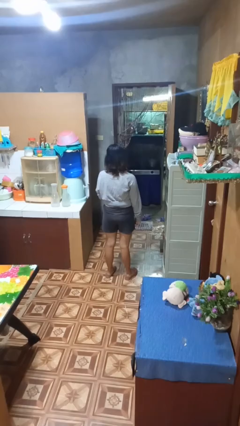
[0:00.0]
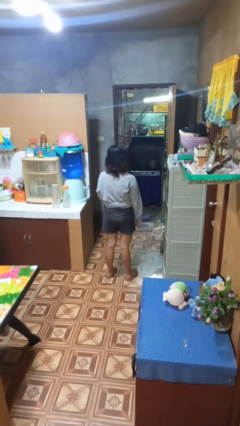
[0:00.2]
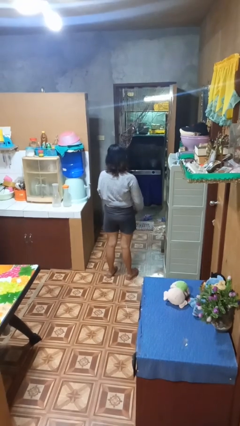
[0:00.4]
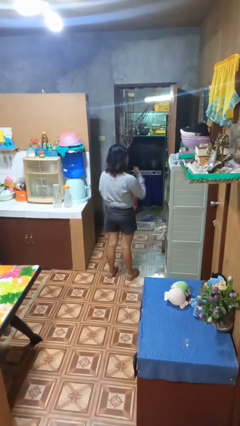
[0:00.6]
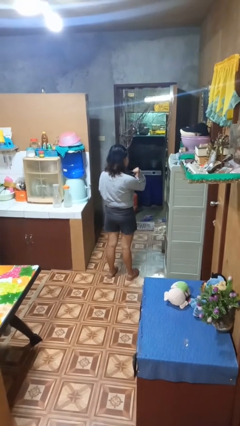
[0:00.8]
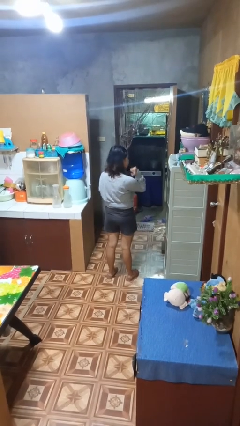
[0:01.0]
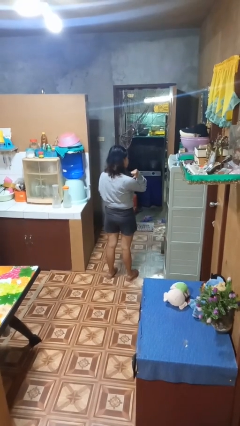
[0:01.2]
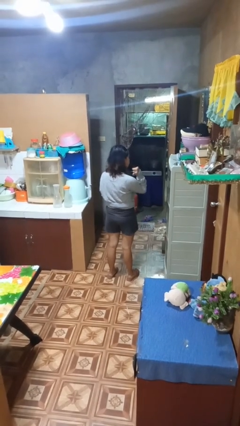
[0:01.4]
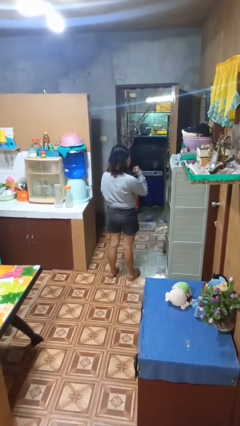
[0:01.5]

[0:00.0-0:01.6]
person gestures behind me

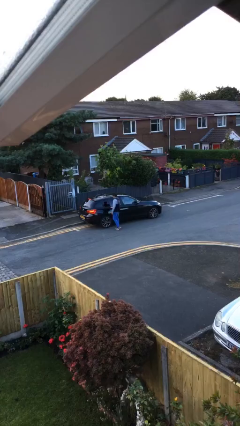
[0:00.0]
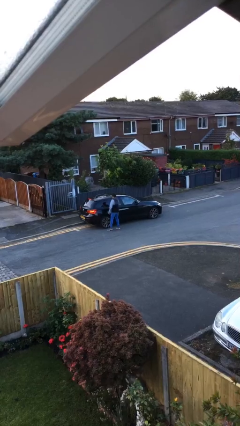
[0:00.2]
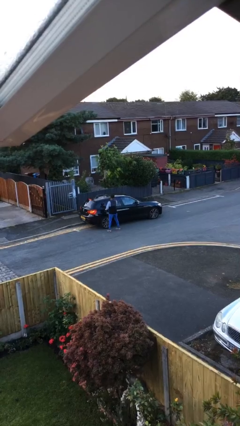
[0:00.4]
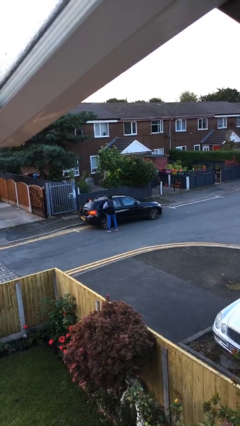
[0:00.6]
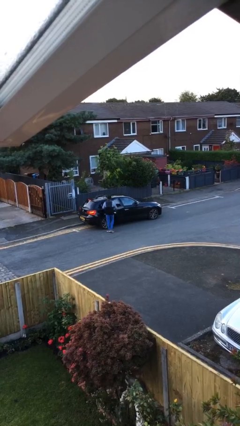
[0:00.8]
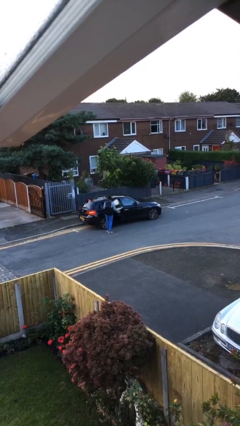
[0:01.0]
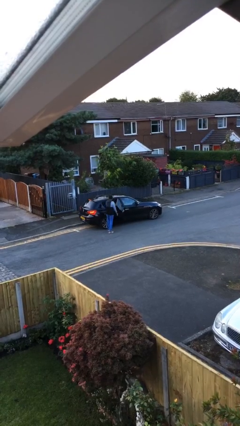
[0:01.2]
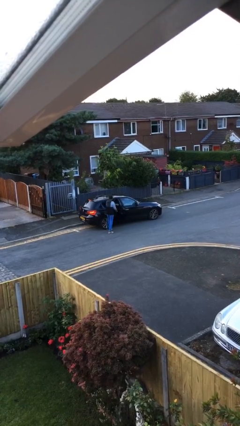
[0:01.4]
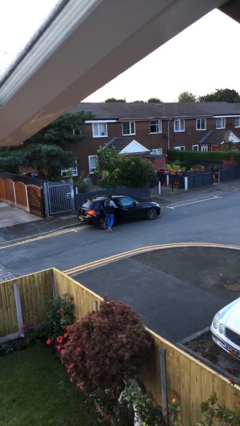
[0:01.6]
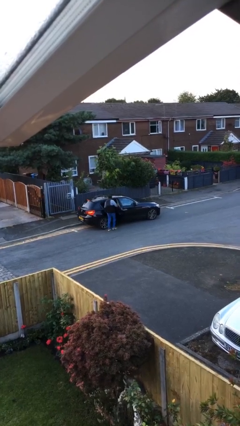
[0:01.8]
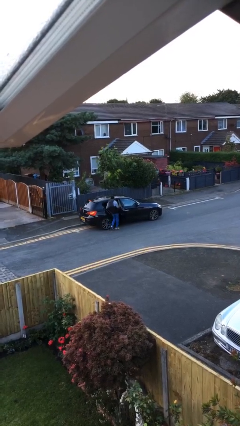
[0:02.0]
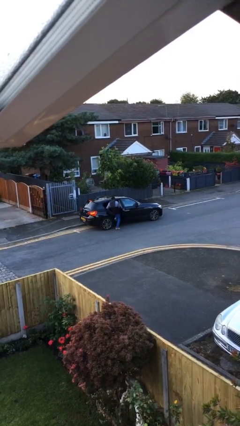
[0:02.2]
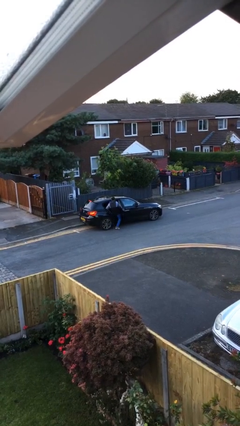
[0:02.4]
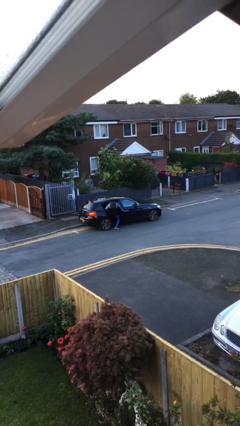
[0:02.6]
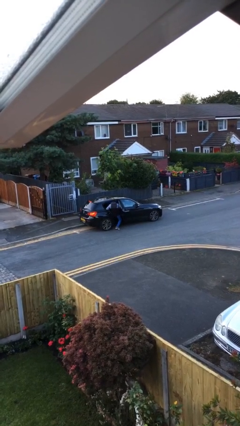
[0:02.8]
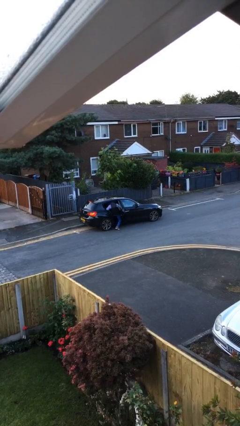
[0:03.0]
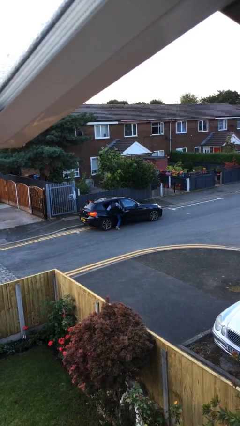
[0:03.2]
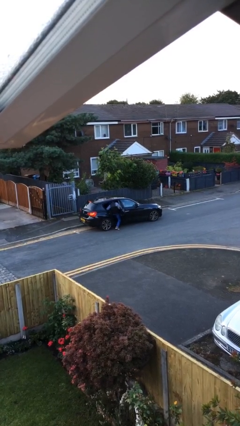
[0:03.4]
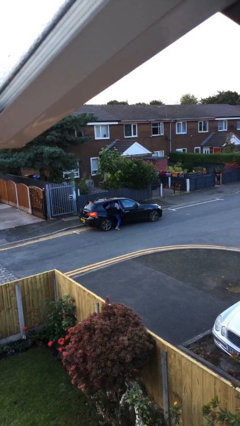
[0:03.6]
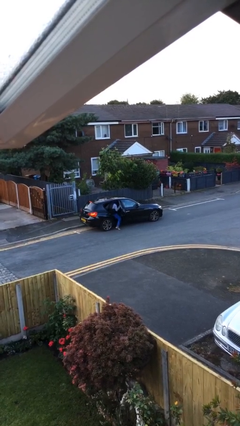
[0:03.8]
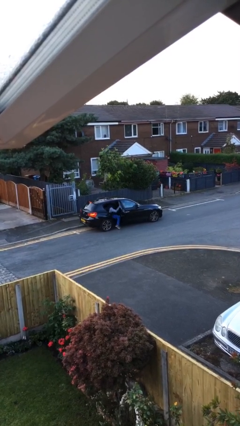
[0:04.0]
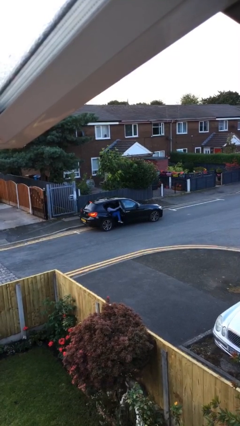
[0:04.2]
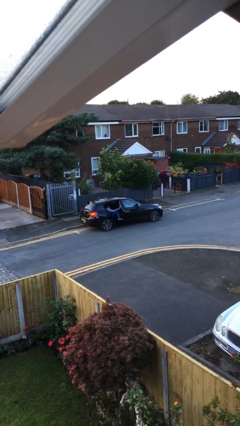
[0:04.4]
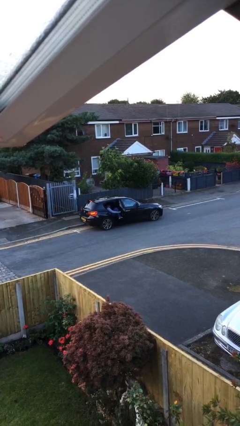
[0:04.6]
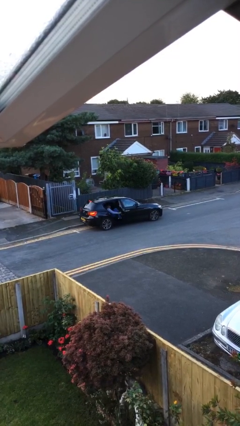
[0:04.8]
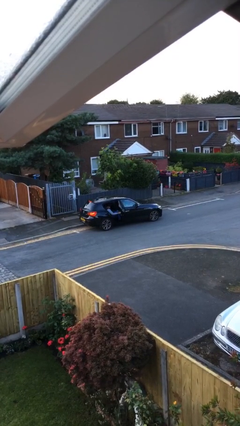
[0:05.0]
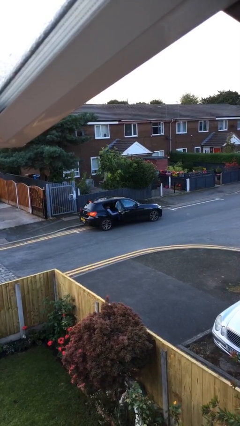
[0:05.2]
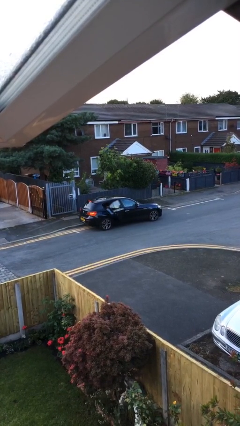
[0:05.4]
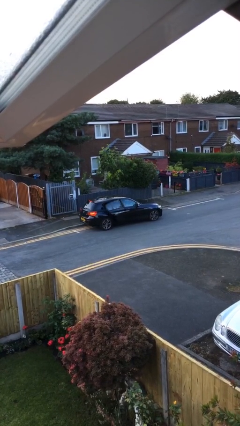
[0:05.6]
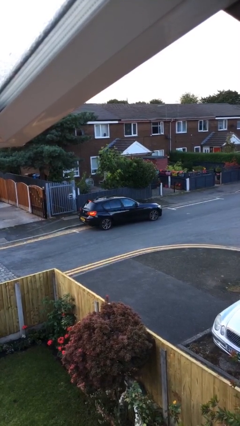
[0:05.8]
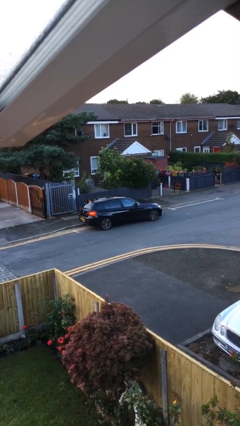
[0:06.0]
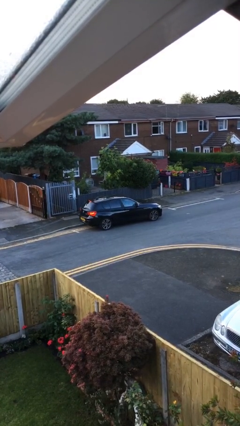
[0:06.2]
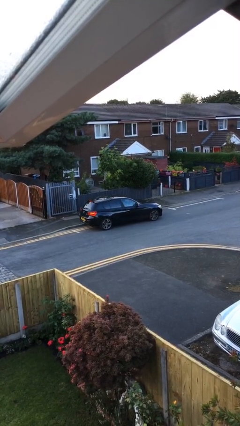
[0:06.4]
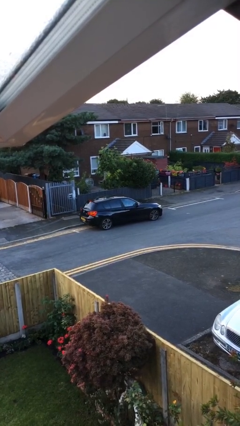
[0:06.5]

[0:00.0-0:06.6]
car picks up person

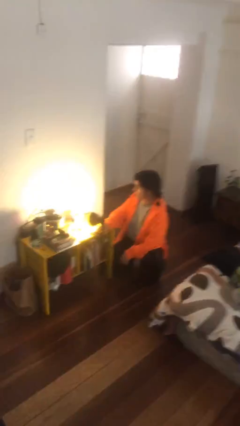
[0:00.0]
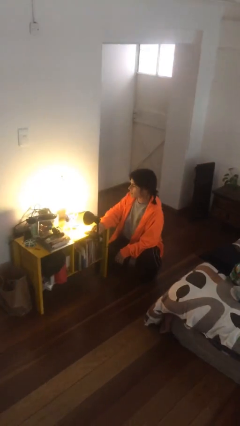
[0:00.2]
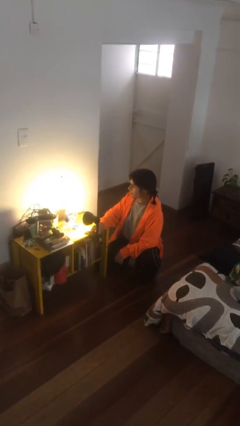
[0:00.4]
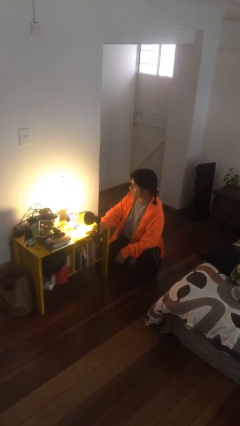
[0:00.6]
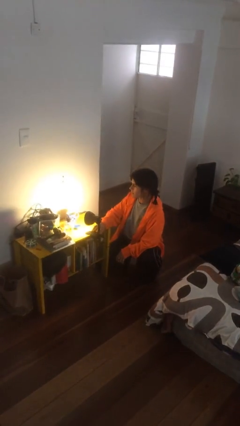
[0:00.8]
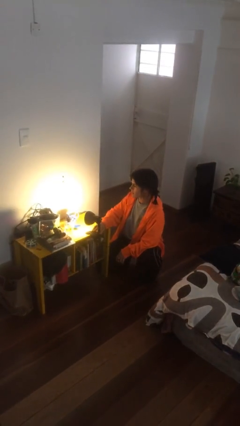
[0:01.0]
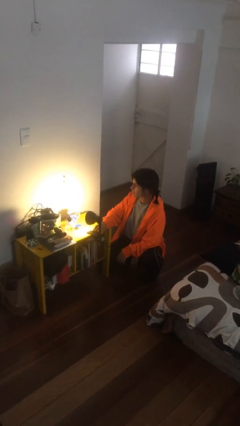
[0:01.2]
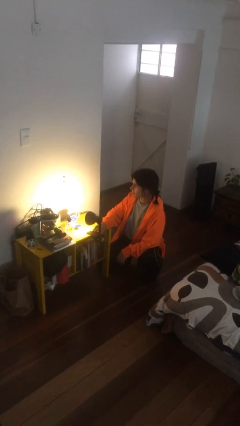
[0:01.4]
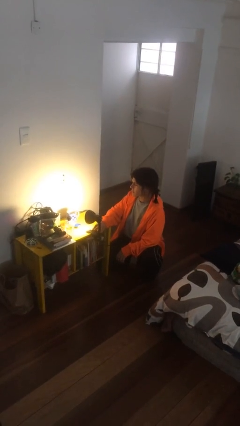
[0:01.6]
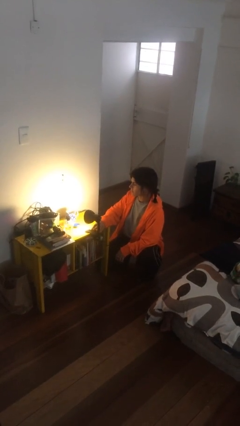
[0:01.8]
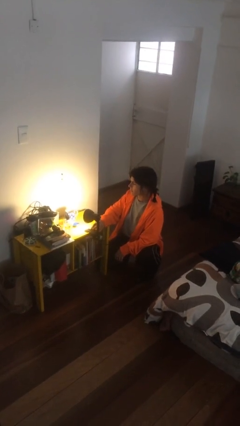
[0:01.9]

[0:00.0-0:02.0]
person turns on lamp

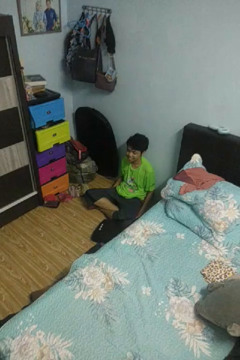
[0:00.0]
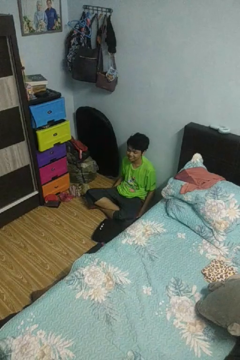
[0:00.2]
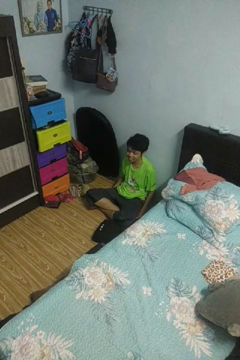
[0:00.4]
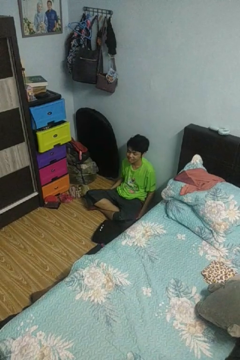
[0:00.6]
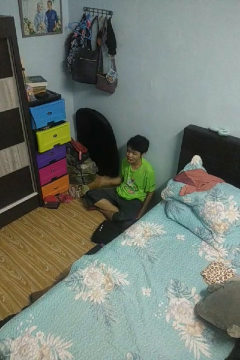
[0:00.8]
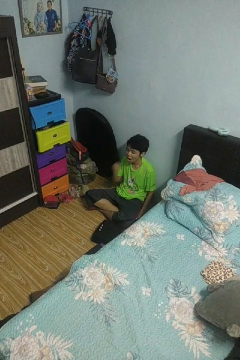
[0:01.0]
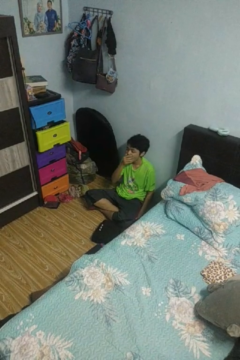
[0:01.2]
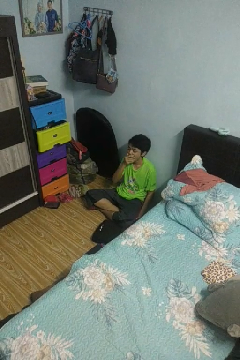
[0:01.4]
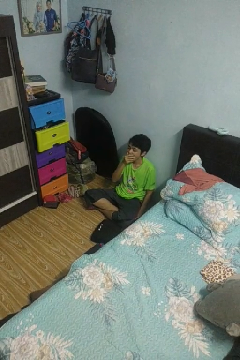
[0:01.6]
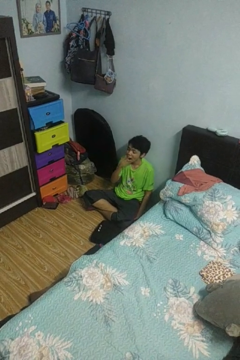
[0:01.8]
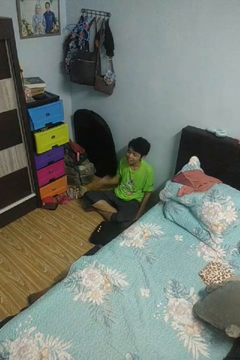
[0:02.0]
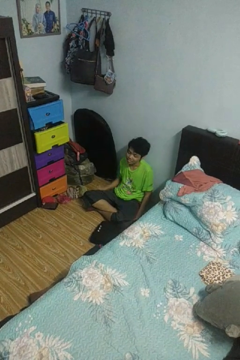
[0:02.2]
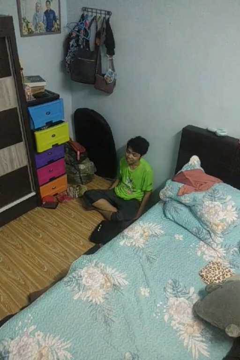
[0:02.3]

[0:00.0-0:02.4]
person yawns

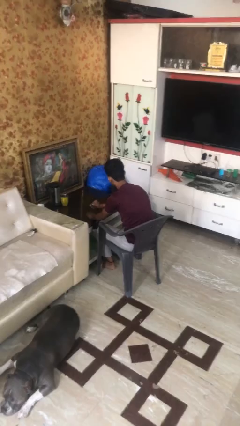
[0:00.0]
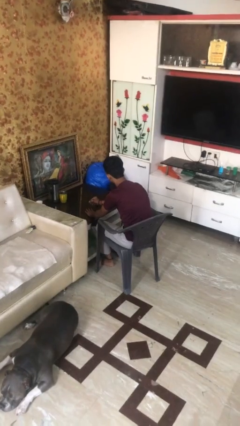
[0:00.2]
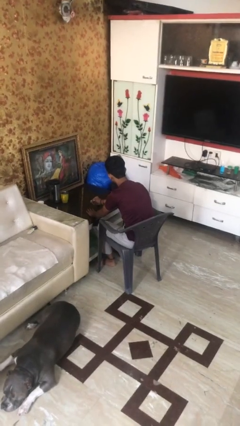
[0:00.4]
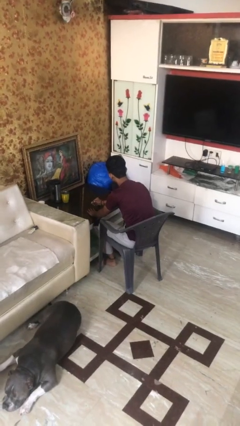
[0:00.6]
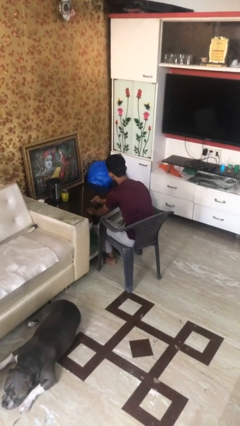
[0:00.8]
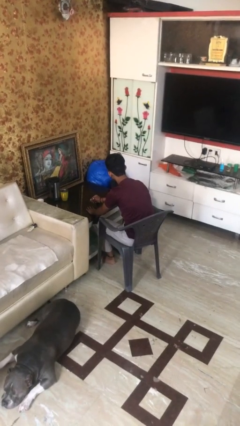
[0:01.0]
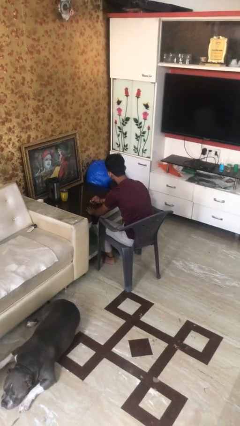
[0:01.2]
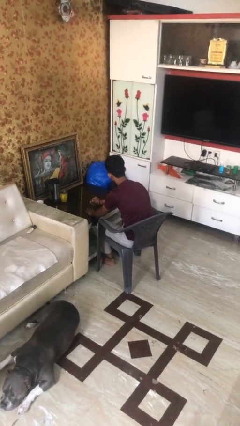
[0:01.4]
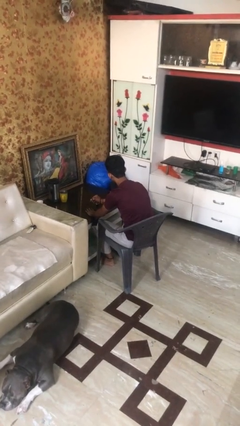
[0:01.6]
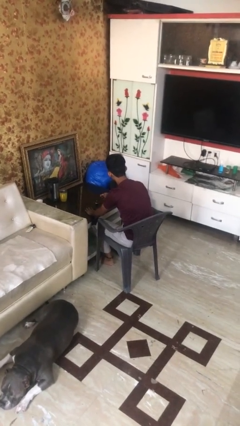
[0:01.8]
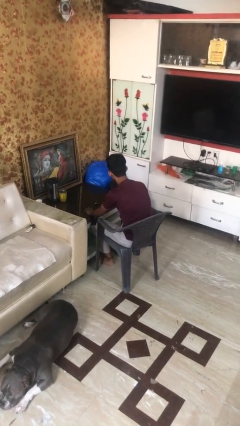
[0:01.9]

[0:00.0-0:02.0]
person paints fingernails

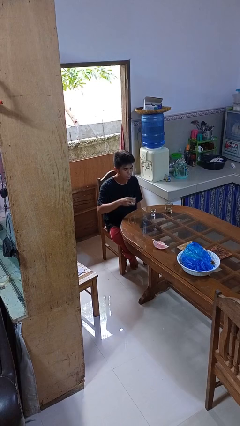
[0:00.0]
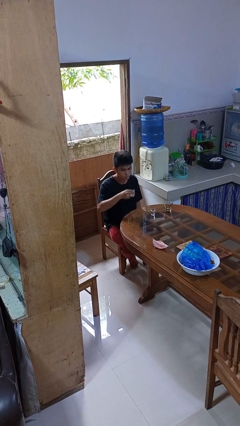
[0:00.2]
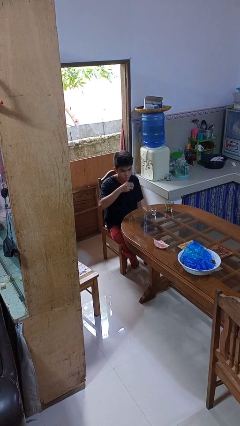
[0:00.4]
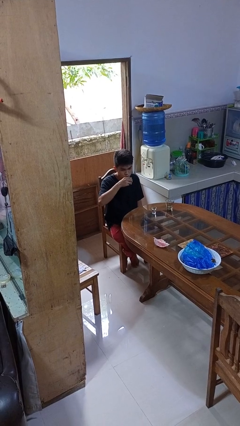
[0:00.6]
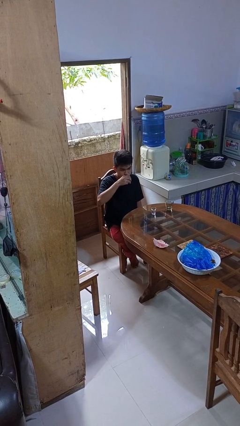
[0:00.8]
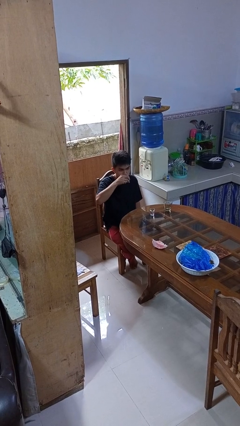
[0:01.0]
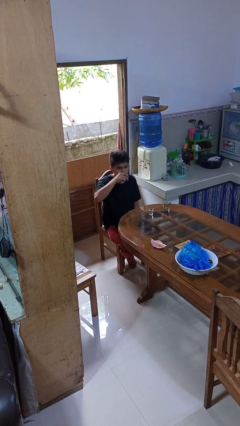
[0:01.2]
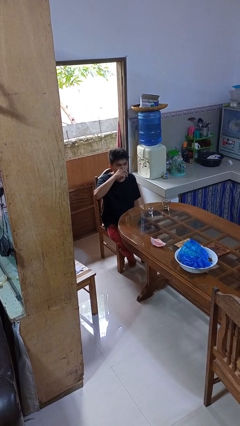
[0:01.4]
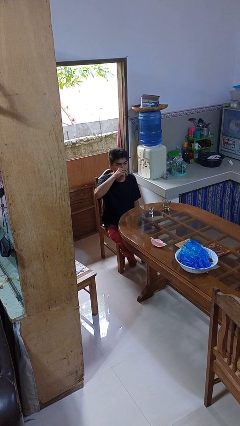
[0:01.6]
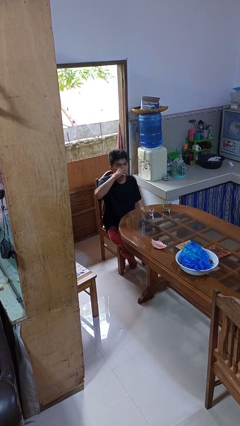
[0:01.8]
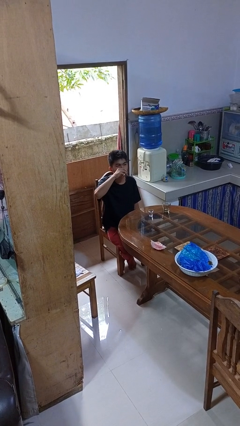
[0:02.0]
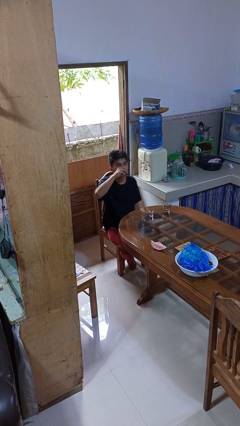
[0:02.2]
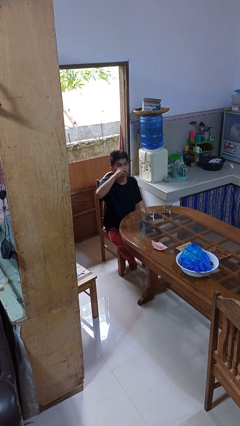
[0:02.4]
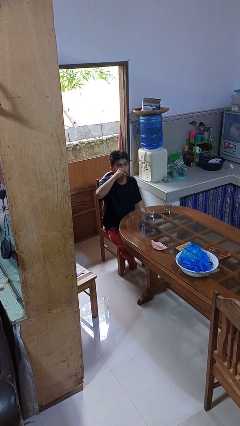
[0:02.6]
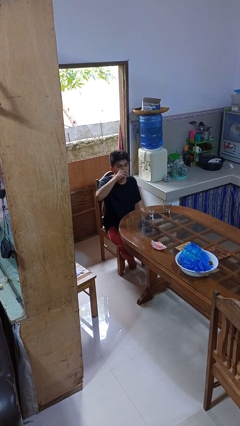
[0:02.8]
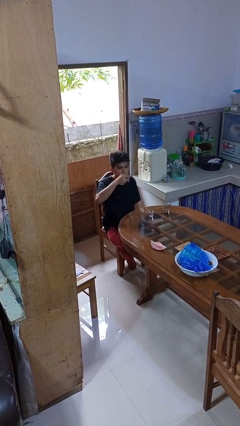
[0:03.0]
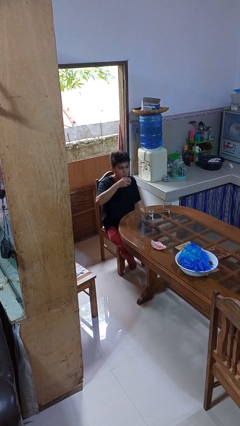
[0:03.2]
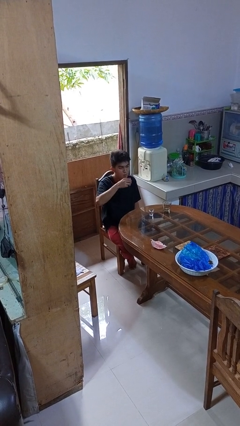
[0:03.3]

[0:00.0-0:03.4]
person drinks from shotglass
